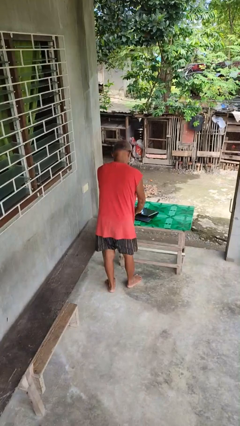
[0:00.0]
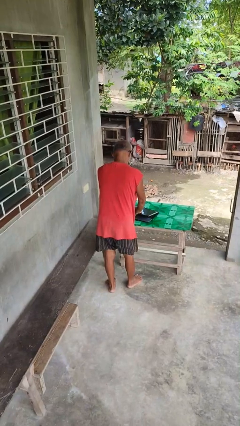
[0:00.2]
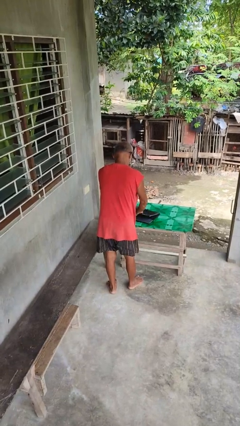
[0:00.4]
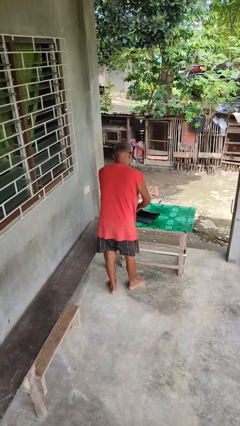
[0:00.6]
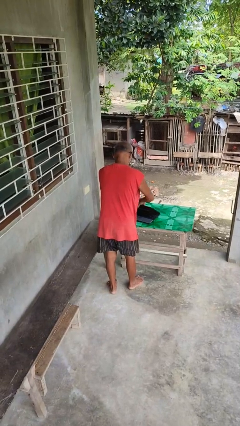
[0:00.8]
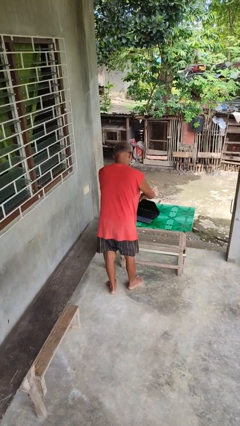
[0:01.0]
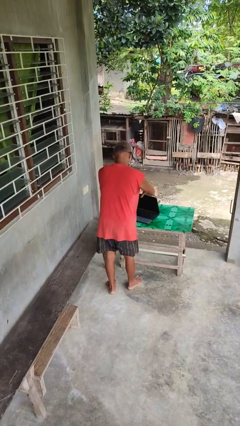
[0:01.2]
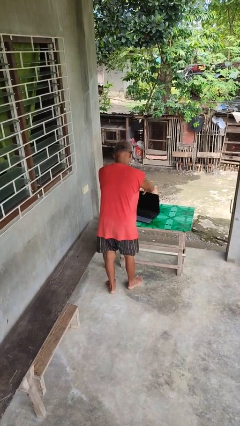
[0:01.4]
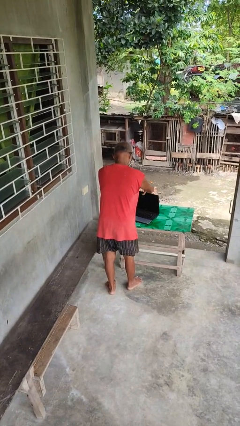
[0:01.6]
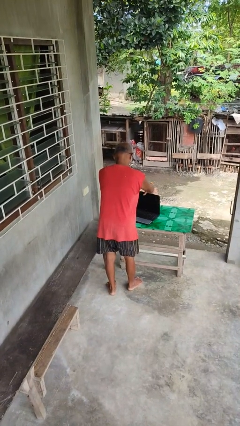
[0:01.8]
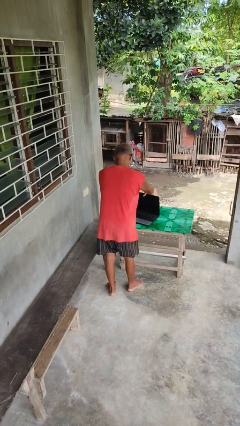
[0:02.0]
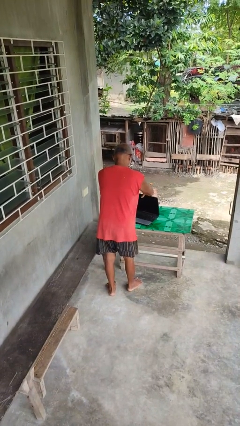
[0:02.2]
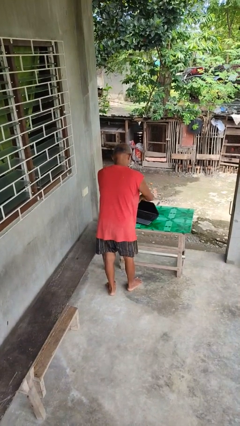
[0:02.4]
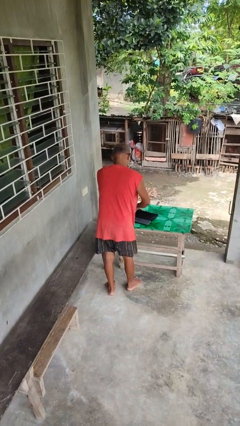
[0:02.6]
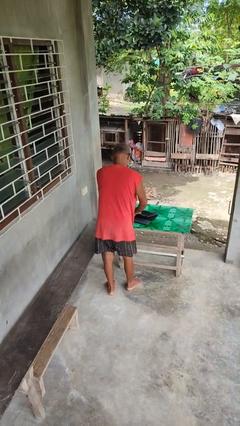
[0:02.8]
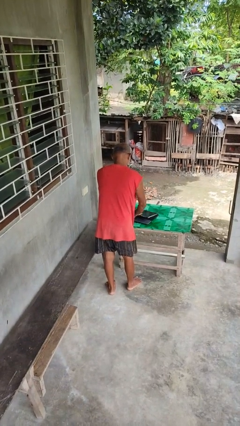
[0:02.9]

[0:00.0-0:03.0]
person opens laptop

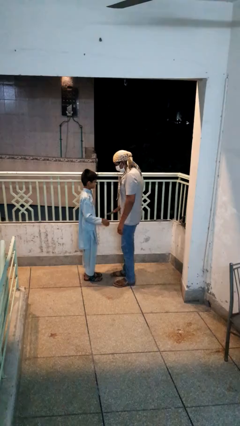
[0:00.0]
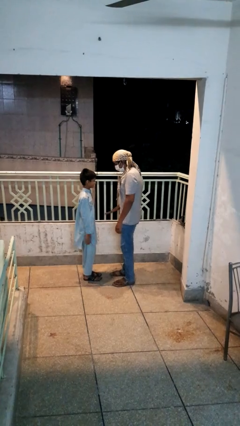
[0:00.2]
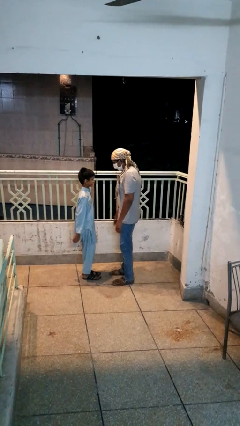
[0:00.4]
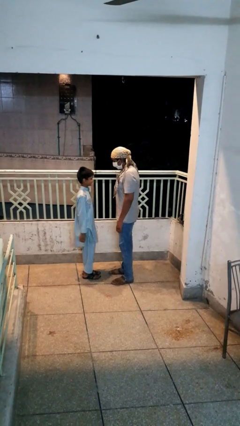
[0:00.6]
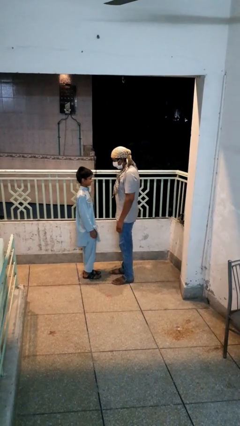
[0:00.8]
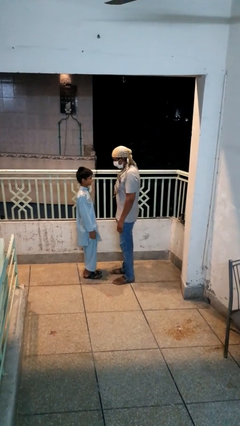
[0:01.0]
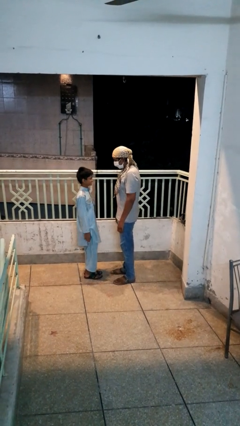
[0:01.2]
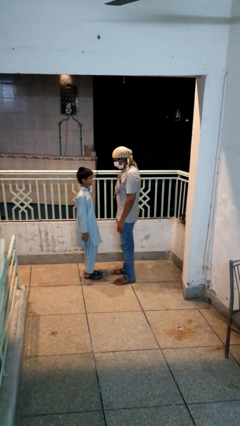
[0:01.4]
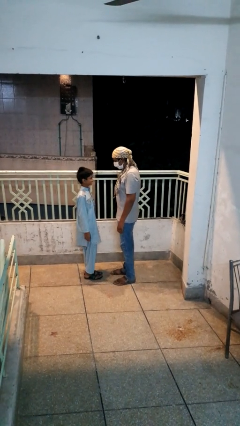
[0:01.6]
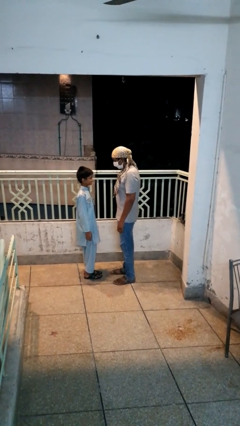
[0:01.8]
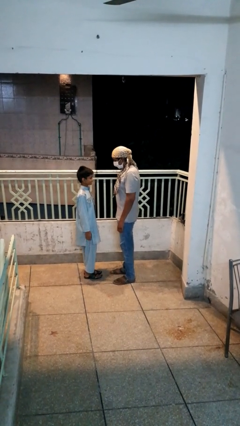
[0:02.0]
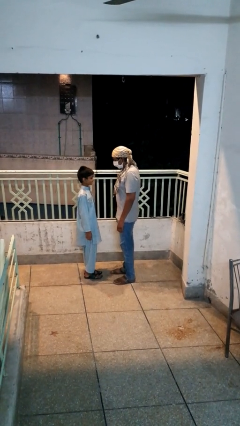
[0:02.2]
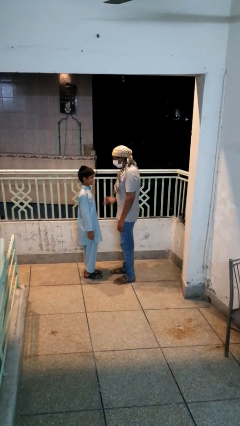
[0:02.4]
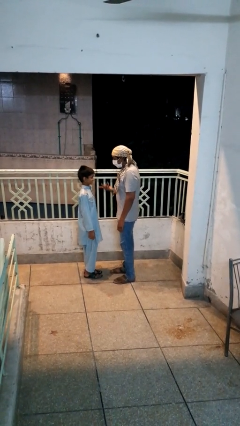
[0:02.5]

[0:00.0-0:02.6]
person highfives hand

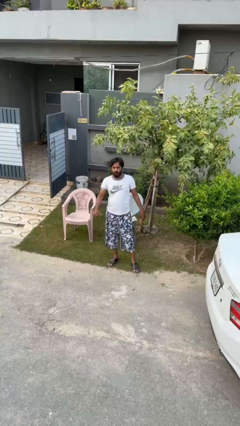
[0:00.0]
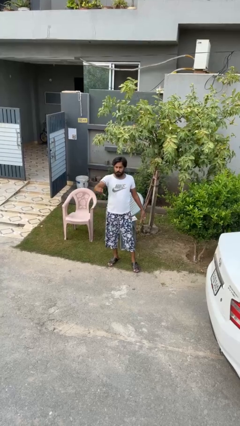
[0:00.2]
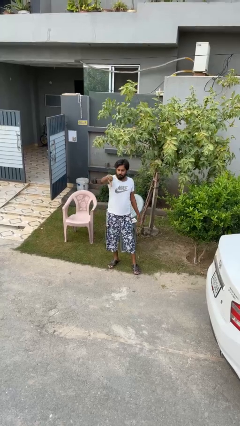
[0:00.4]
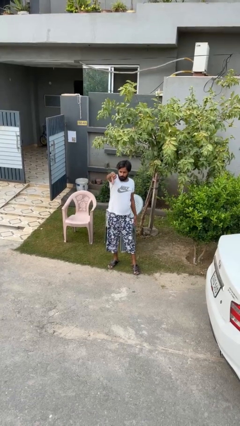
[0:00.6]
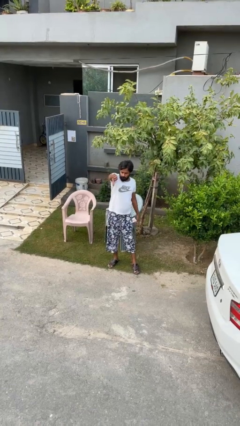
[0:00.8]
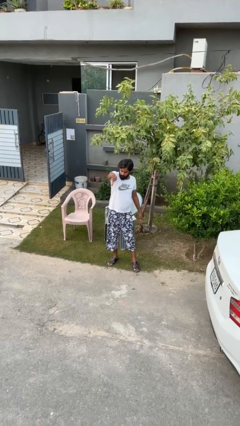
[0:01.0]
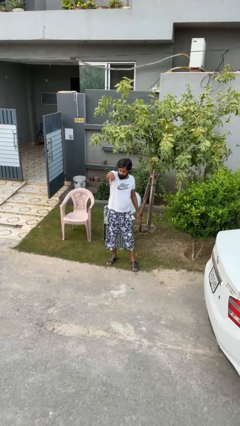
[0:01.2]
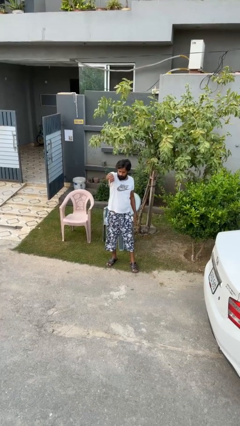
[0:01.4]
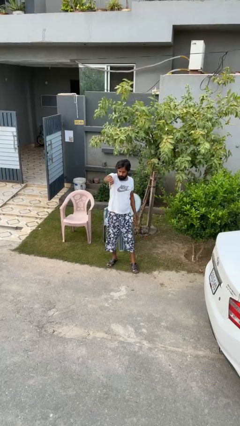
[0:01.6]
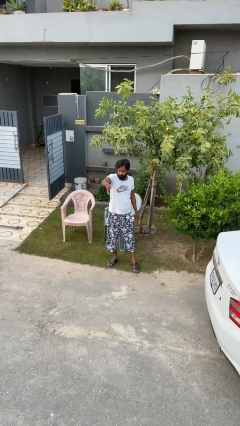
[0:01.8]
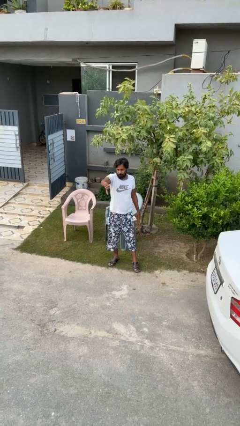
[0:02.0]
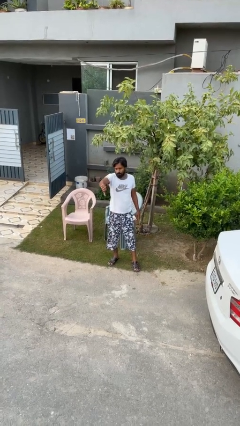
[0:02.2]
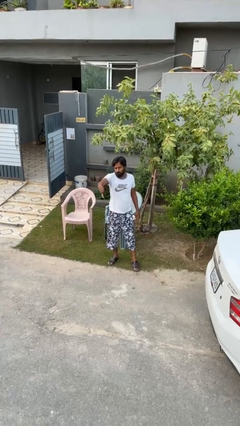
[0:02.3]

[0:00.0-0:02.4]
person gestures thumbs down

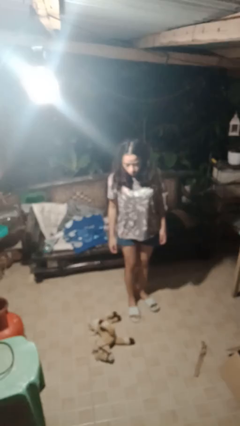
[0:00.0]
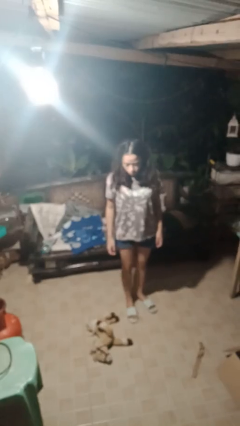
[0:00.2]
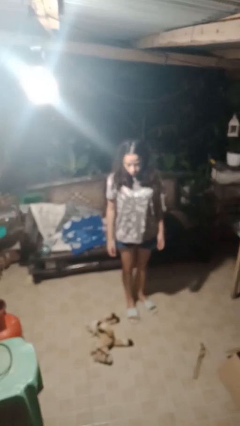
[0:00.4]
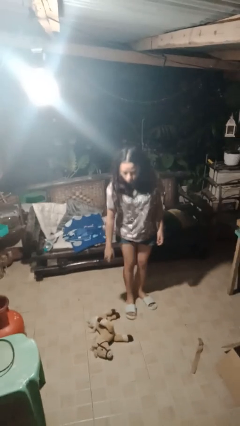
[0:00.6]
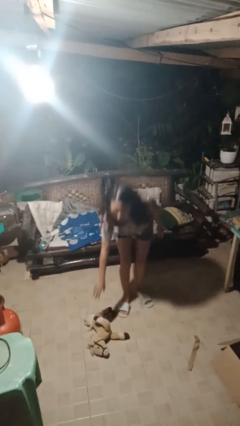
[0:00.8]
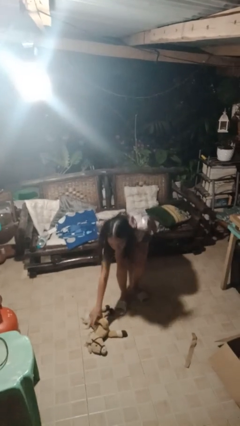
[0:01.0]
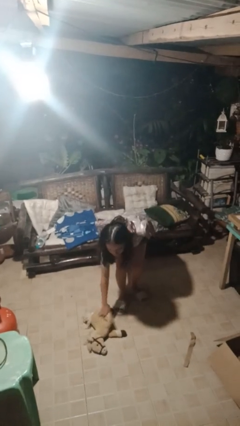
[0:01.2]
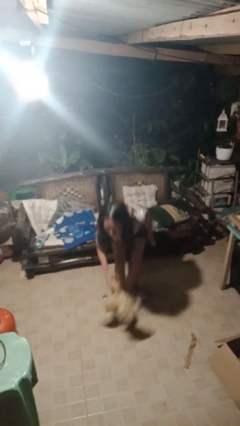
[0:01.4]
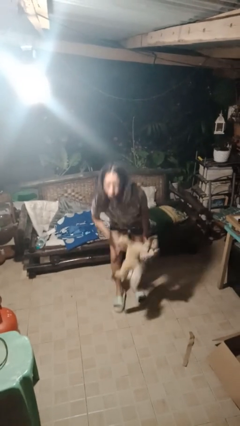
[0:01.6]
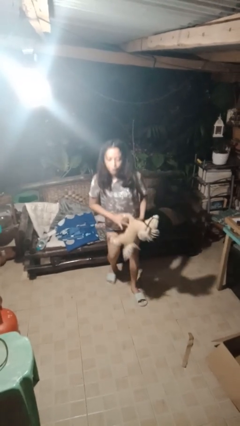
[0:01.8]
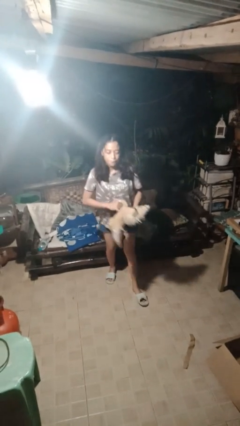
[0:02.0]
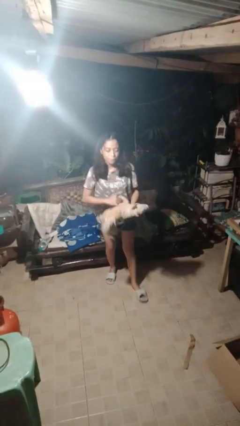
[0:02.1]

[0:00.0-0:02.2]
person picks up object from floor

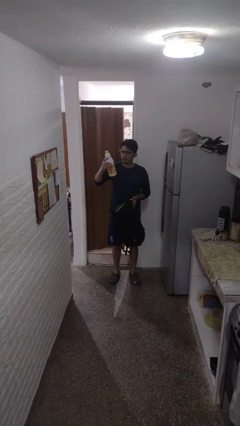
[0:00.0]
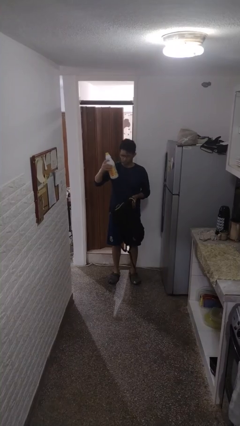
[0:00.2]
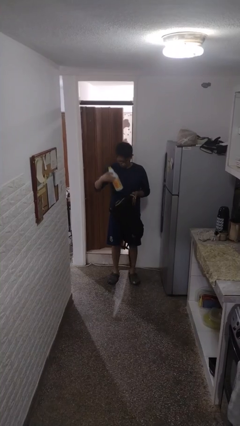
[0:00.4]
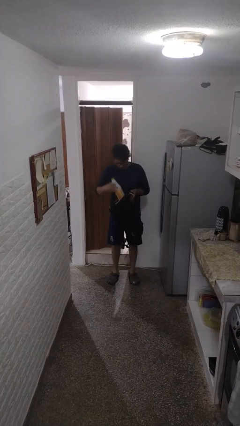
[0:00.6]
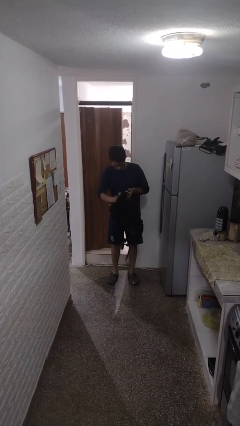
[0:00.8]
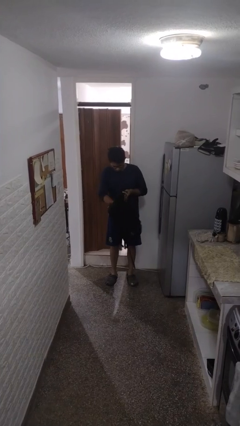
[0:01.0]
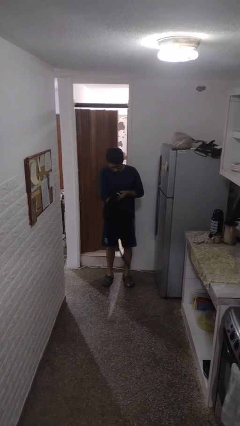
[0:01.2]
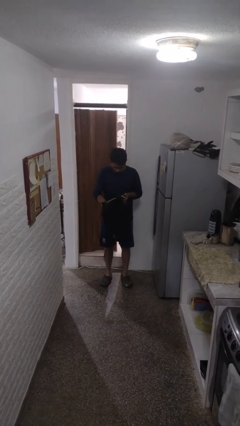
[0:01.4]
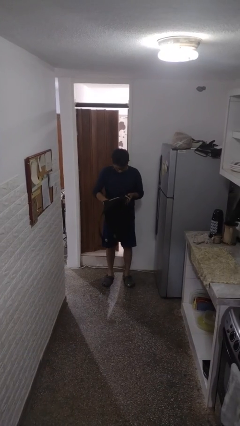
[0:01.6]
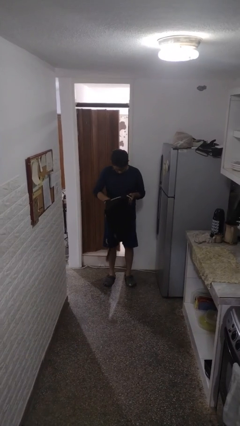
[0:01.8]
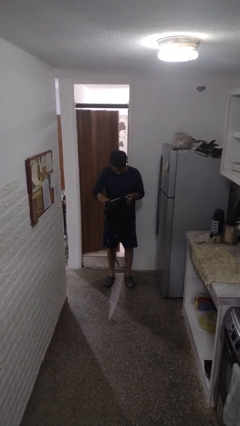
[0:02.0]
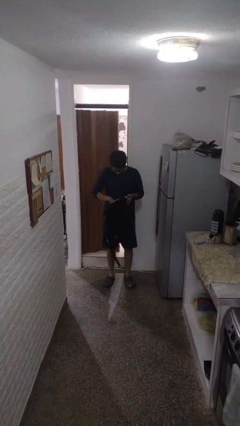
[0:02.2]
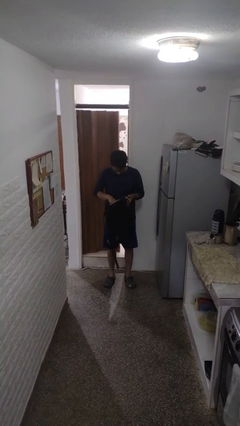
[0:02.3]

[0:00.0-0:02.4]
person puts object into backpack

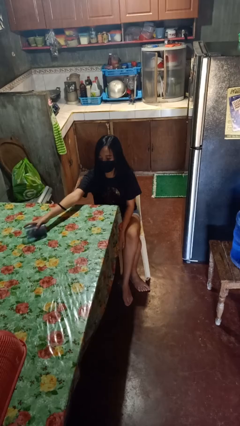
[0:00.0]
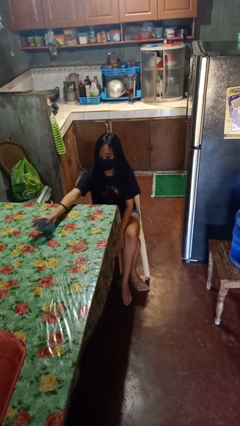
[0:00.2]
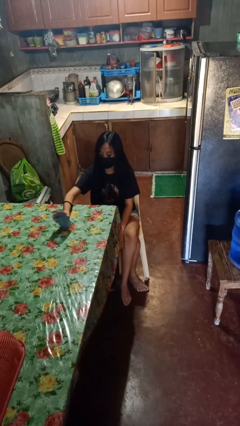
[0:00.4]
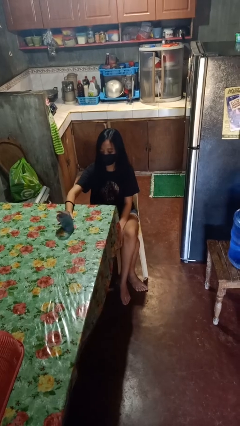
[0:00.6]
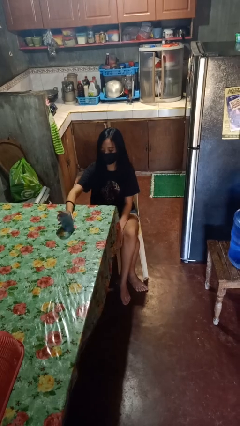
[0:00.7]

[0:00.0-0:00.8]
person sets upright glass

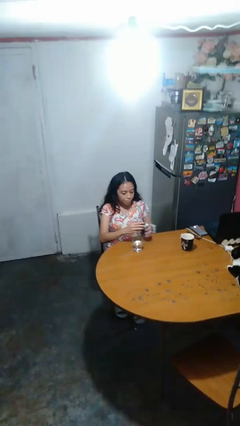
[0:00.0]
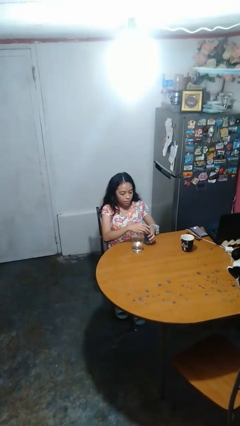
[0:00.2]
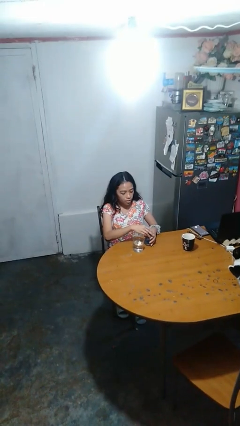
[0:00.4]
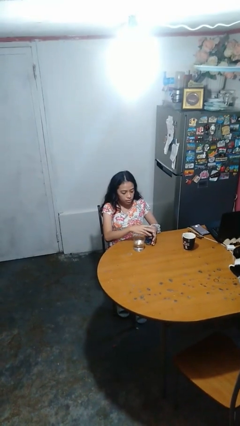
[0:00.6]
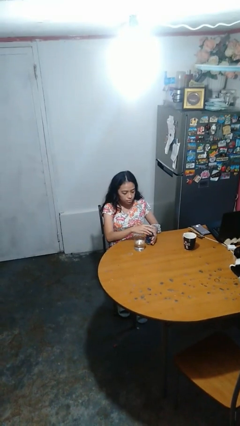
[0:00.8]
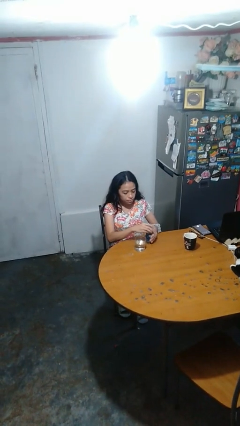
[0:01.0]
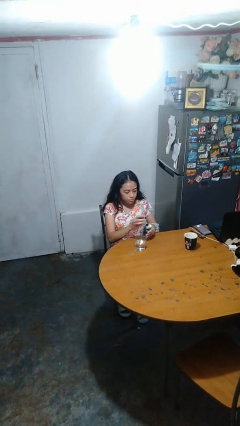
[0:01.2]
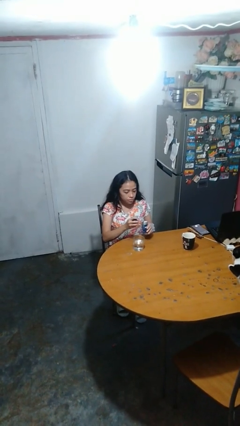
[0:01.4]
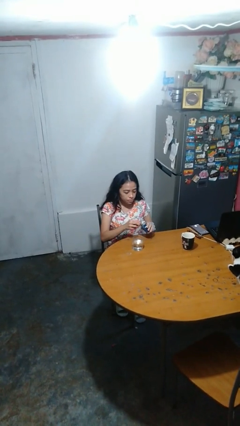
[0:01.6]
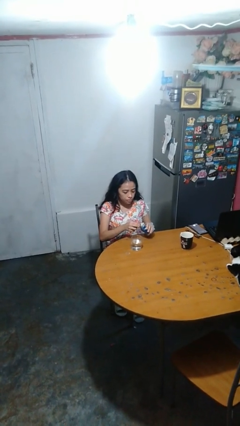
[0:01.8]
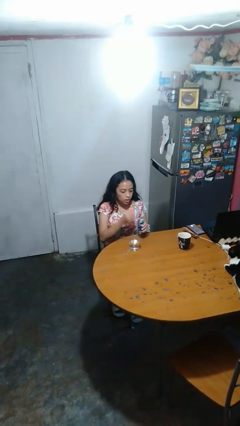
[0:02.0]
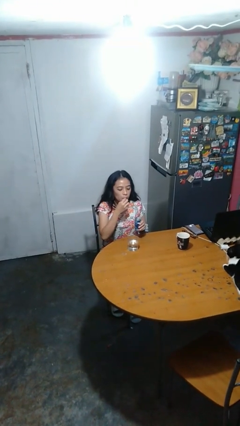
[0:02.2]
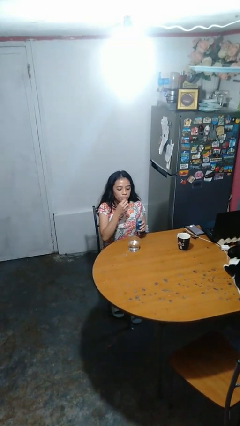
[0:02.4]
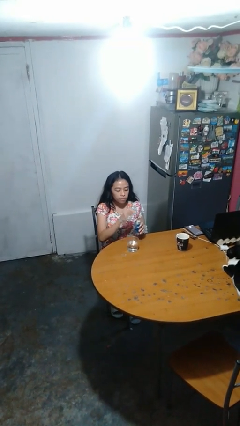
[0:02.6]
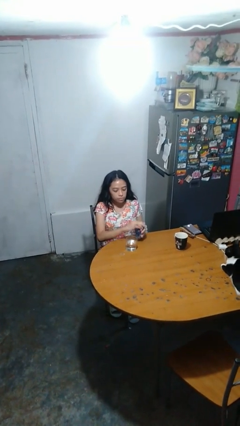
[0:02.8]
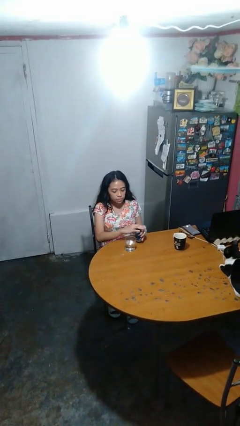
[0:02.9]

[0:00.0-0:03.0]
person takes medicine pills

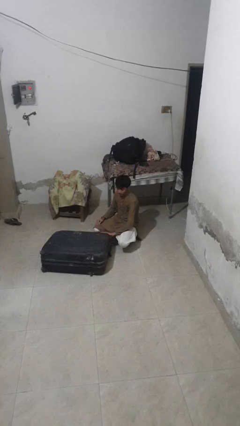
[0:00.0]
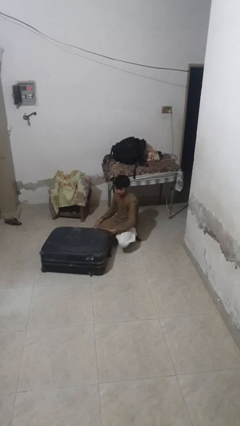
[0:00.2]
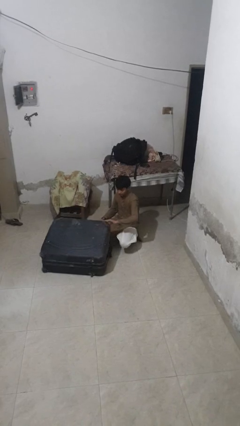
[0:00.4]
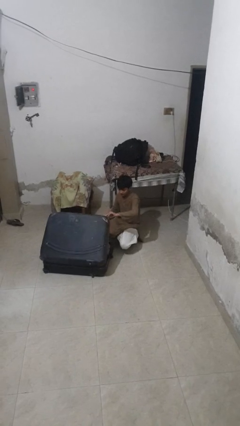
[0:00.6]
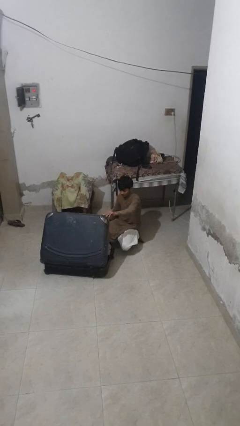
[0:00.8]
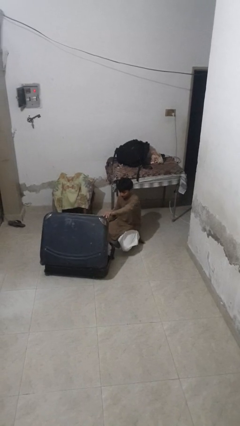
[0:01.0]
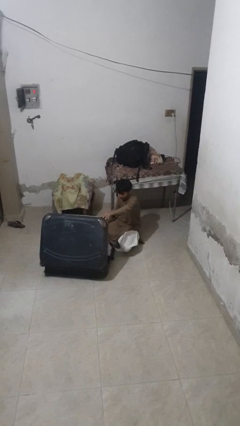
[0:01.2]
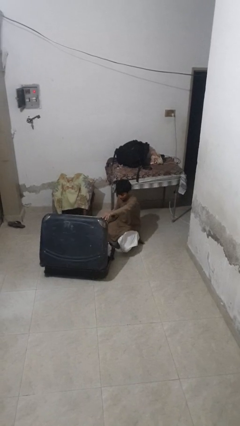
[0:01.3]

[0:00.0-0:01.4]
person opens suitcase
